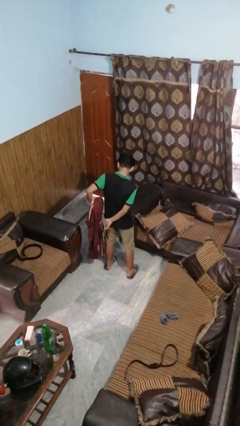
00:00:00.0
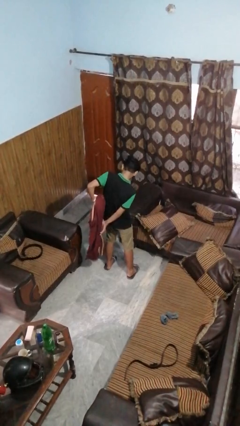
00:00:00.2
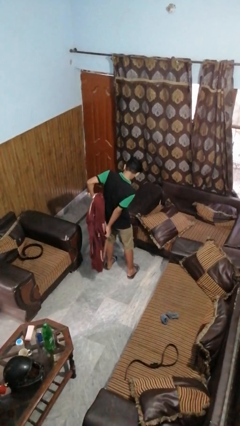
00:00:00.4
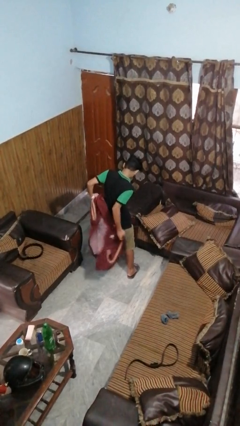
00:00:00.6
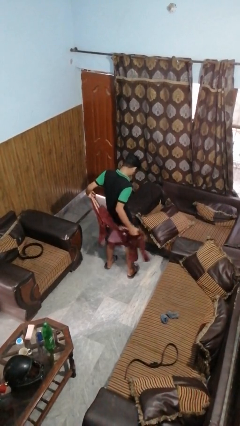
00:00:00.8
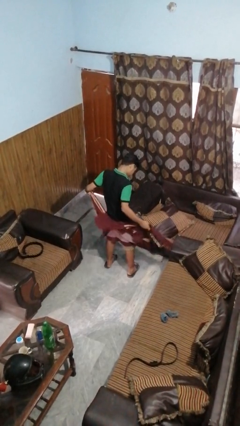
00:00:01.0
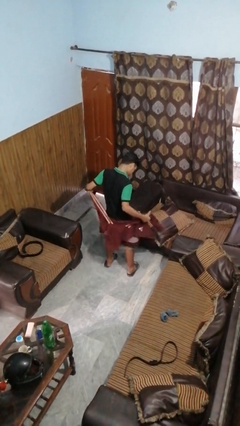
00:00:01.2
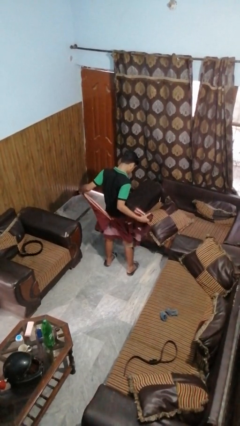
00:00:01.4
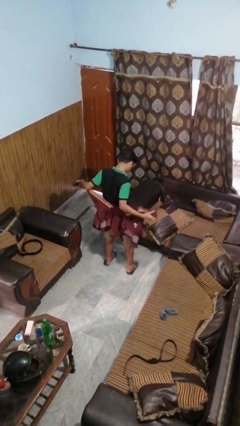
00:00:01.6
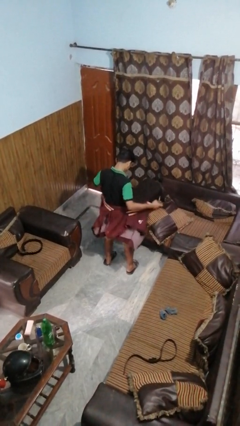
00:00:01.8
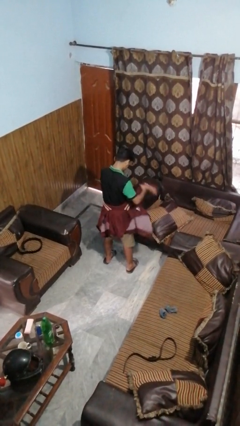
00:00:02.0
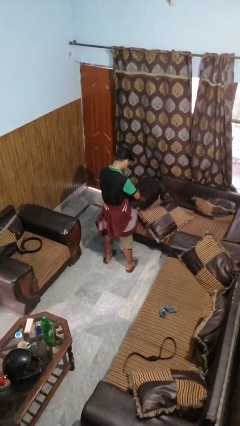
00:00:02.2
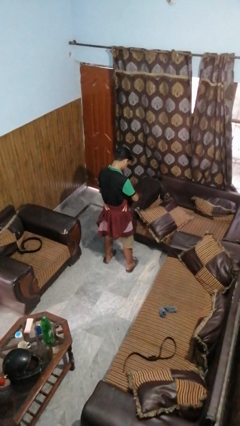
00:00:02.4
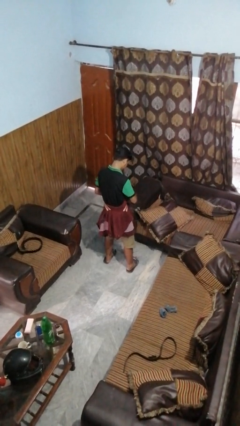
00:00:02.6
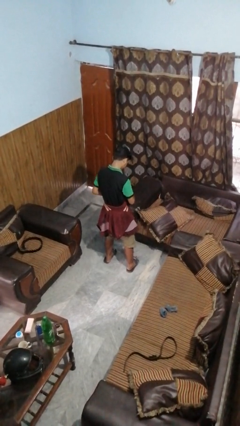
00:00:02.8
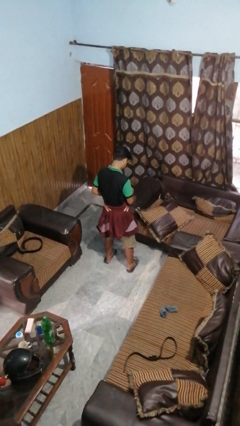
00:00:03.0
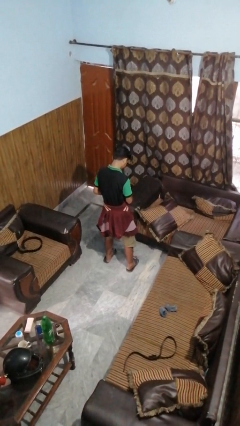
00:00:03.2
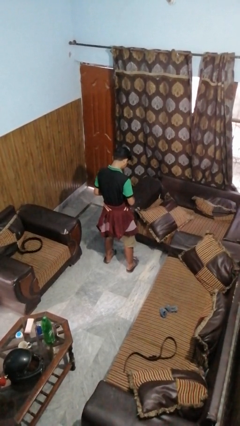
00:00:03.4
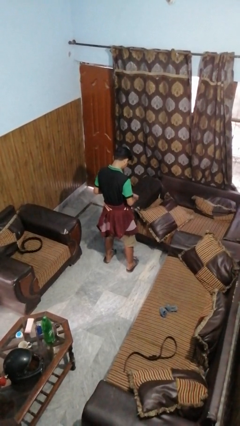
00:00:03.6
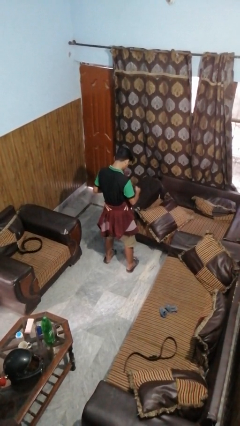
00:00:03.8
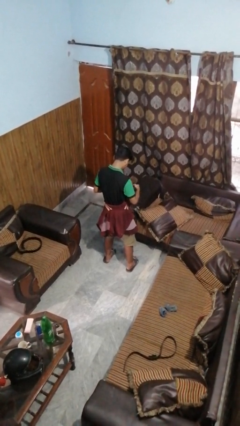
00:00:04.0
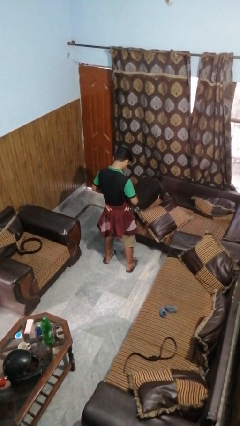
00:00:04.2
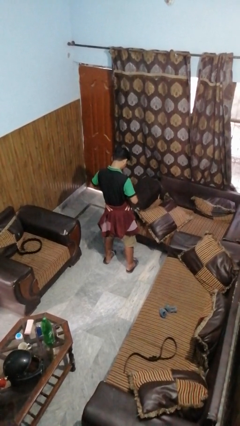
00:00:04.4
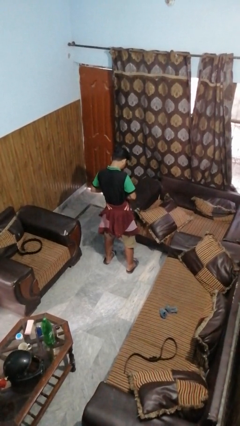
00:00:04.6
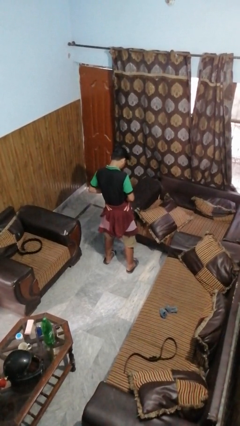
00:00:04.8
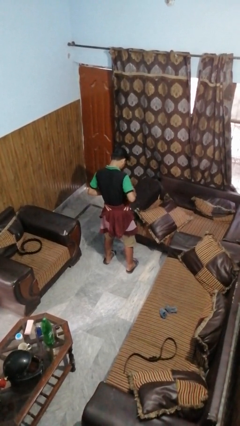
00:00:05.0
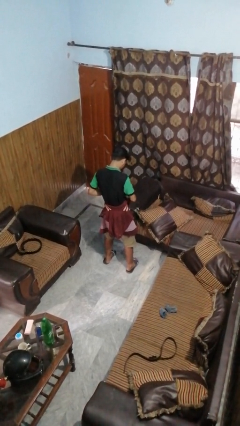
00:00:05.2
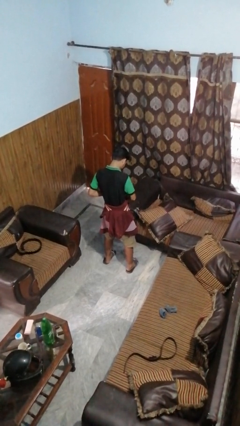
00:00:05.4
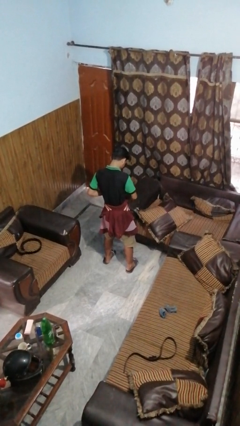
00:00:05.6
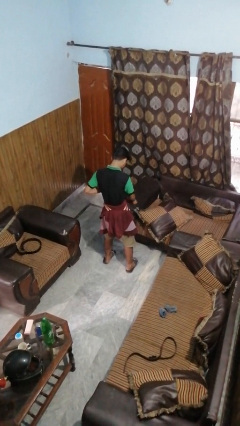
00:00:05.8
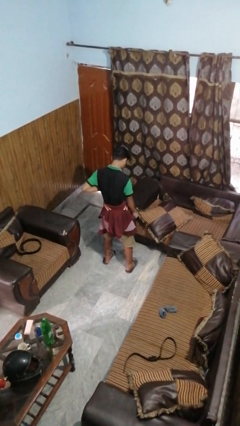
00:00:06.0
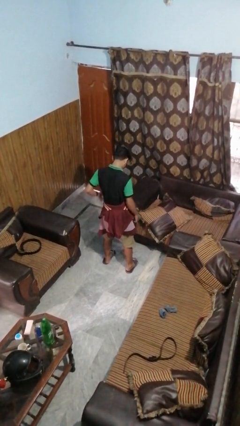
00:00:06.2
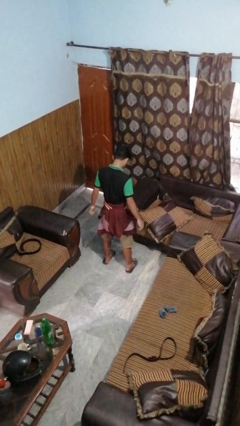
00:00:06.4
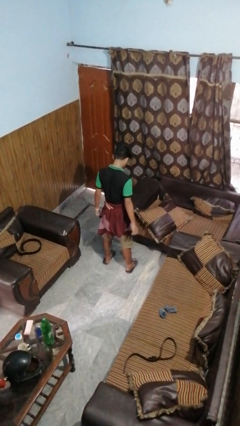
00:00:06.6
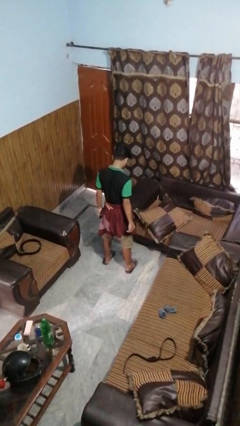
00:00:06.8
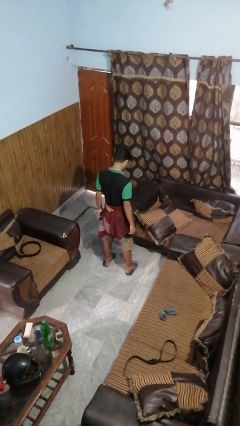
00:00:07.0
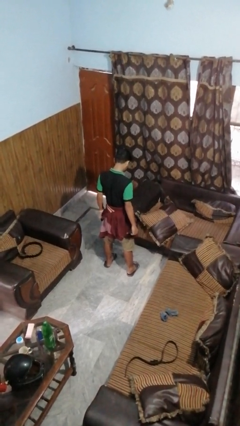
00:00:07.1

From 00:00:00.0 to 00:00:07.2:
person ties jacket around waist

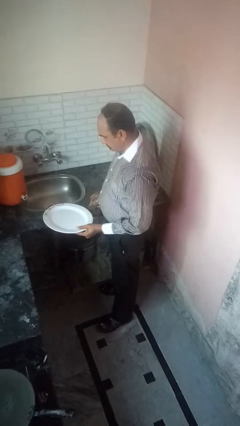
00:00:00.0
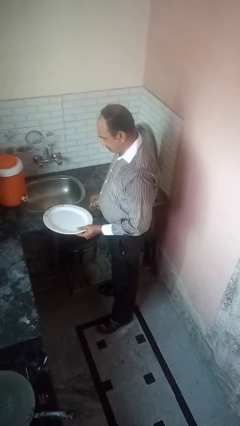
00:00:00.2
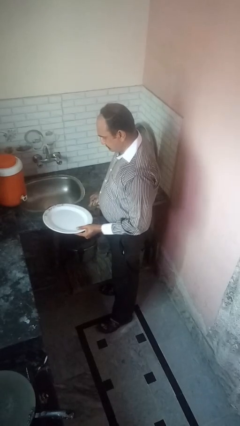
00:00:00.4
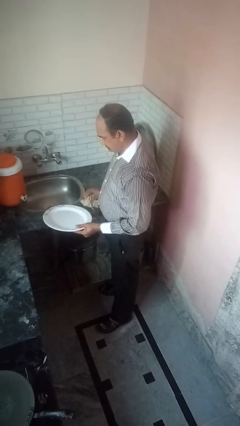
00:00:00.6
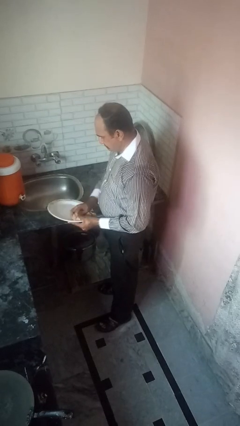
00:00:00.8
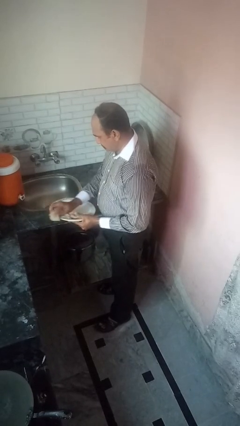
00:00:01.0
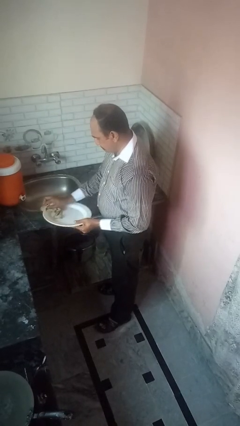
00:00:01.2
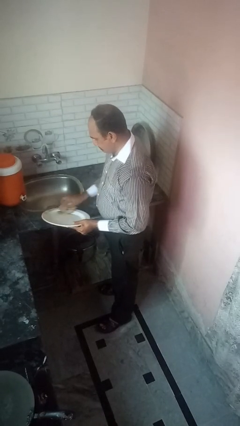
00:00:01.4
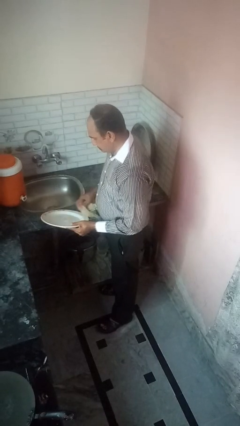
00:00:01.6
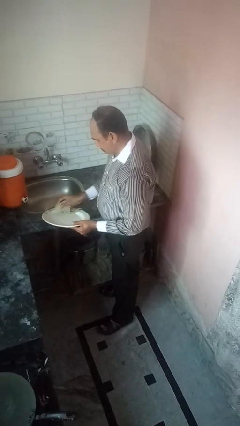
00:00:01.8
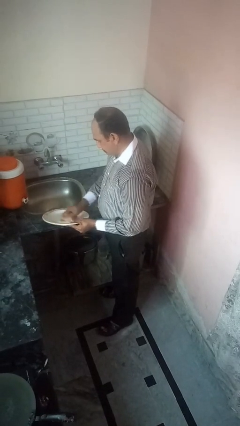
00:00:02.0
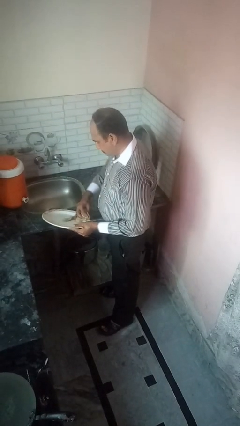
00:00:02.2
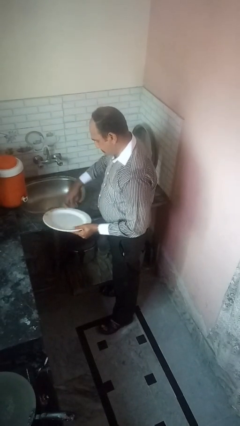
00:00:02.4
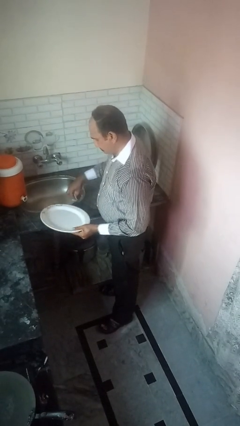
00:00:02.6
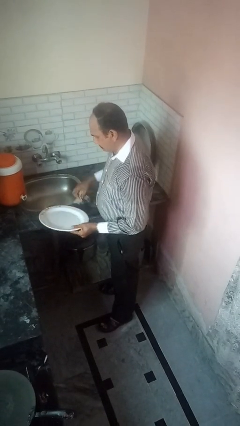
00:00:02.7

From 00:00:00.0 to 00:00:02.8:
person dries dish

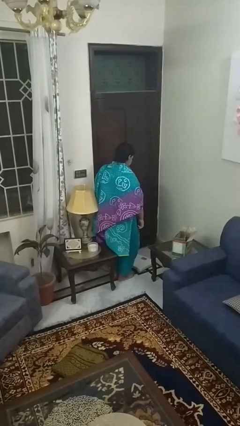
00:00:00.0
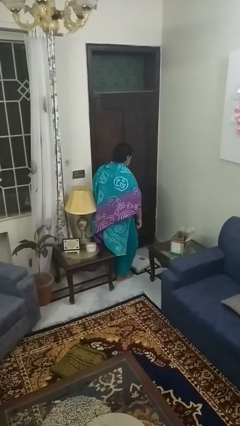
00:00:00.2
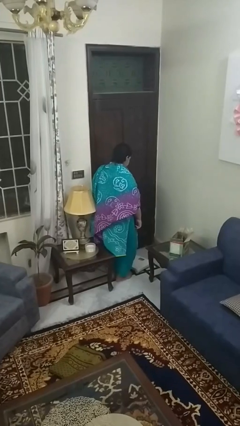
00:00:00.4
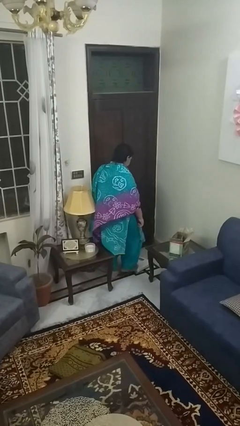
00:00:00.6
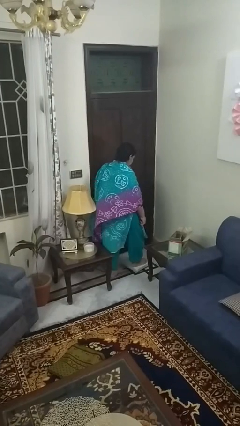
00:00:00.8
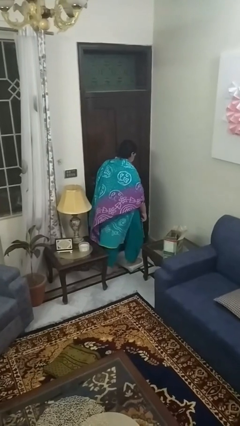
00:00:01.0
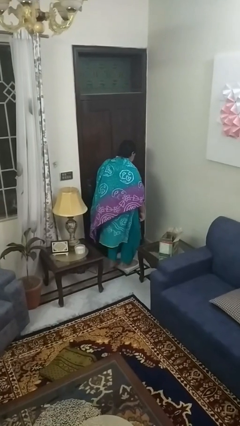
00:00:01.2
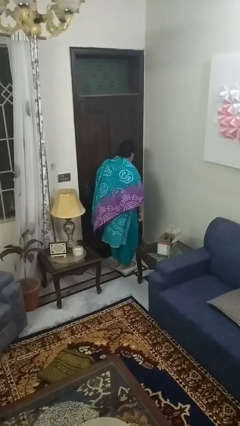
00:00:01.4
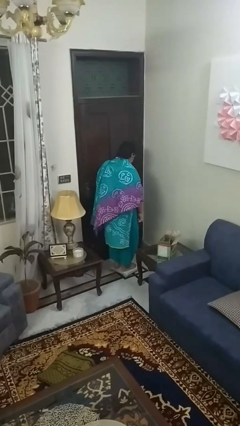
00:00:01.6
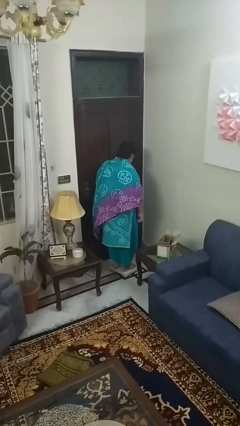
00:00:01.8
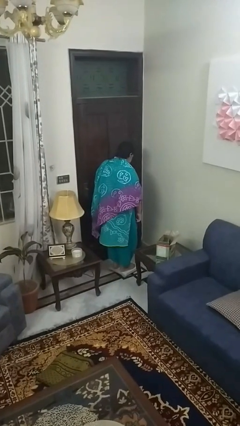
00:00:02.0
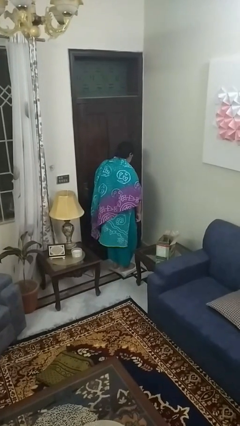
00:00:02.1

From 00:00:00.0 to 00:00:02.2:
person uses bodyweight scale

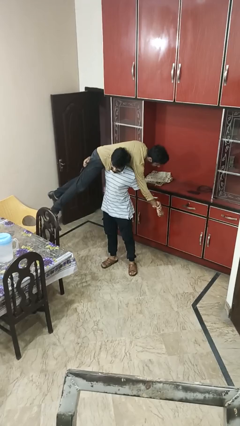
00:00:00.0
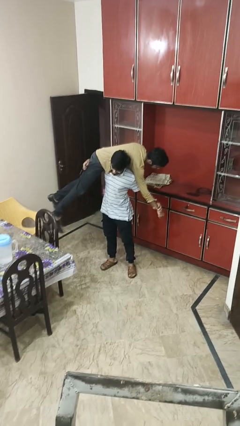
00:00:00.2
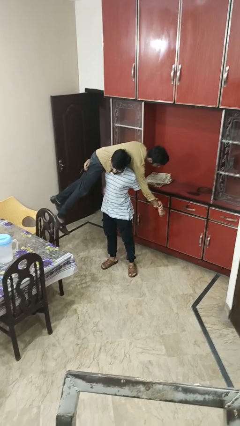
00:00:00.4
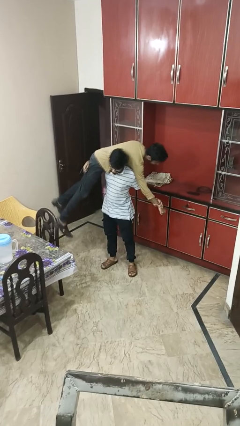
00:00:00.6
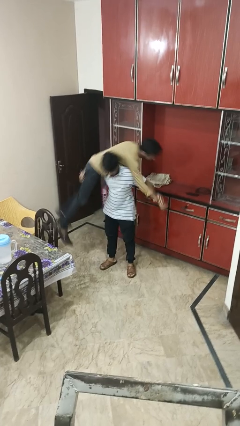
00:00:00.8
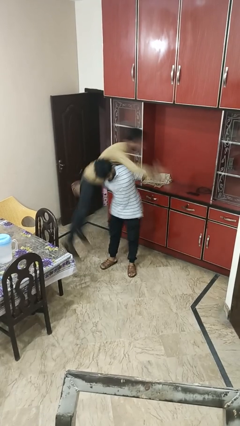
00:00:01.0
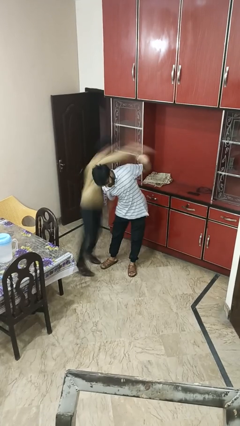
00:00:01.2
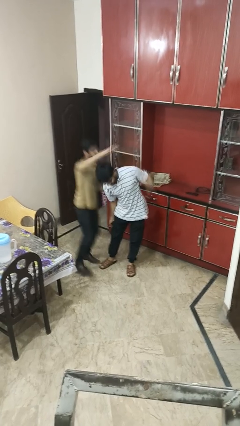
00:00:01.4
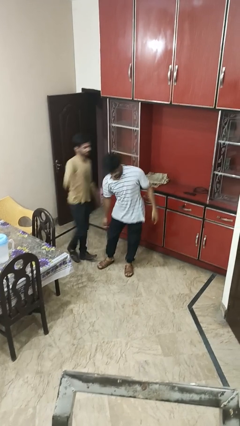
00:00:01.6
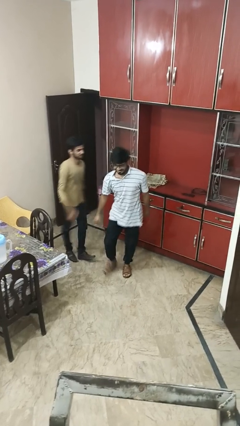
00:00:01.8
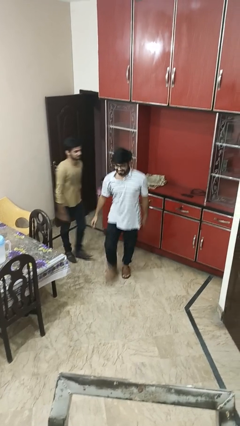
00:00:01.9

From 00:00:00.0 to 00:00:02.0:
person puts down person

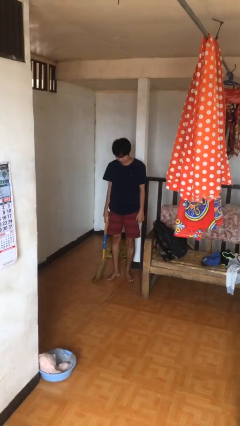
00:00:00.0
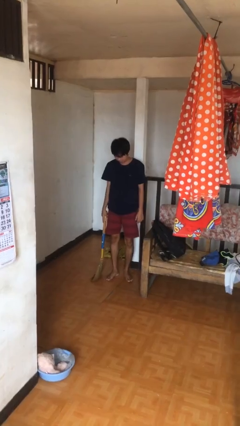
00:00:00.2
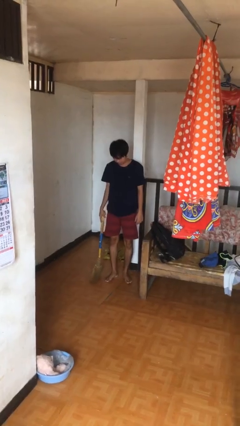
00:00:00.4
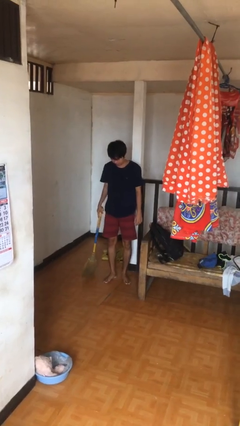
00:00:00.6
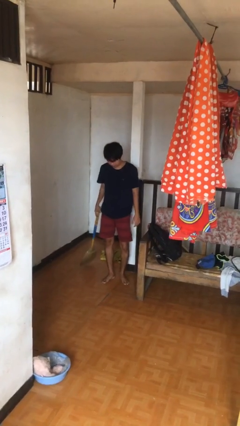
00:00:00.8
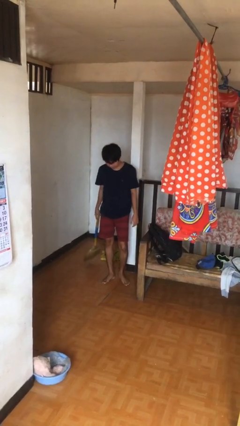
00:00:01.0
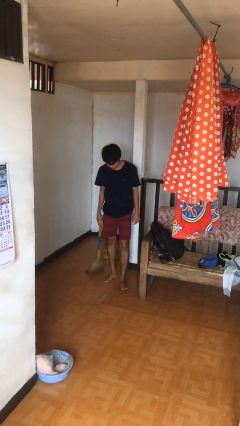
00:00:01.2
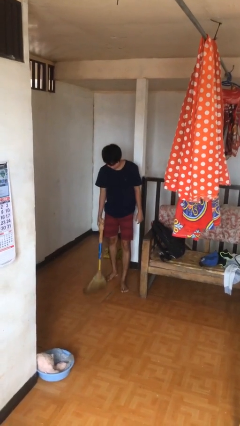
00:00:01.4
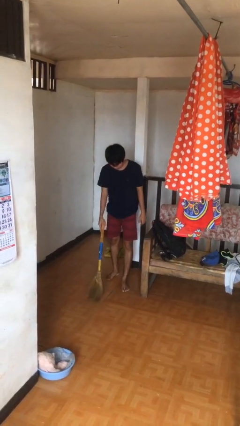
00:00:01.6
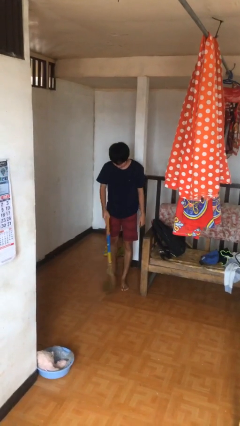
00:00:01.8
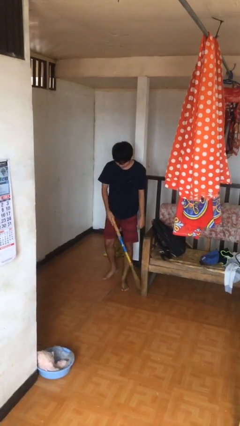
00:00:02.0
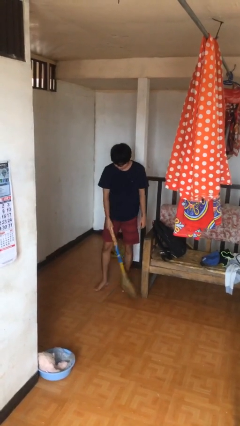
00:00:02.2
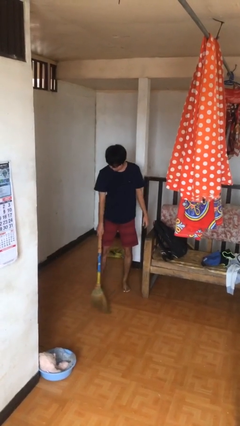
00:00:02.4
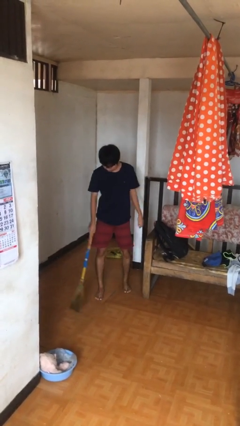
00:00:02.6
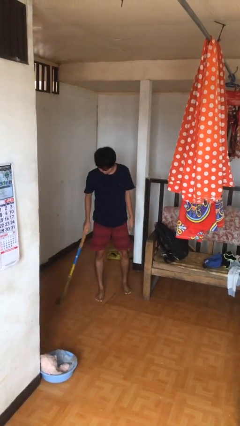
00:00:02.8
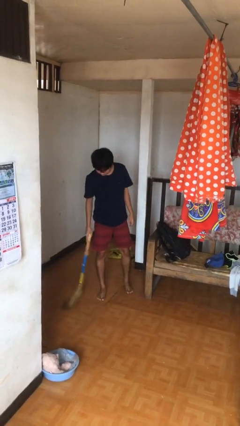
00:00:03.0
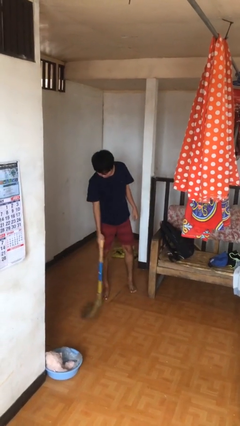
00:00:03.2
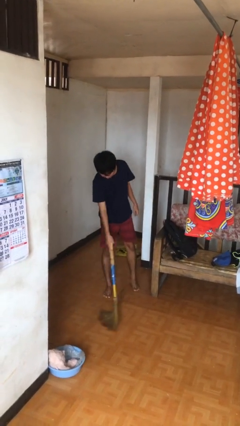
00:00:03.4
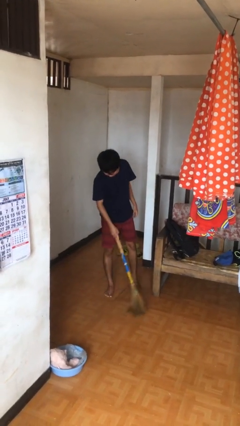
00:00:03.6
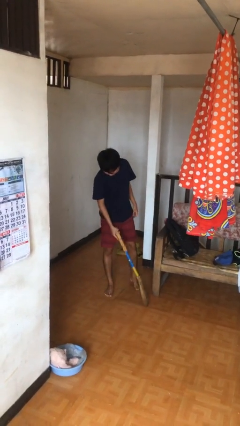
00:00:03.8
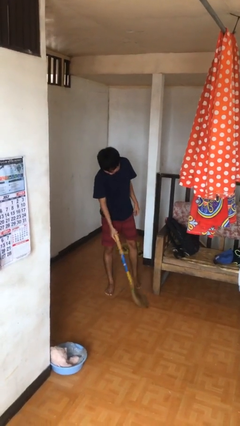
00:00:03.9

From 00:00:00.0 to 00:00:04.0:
person sweeps floor
